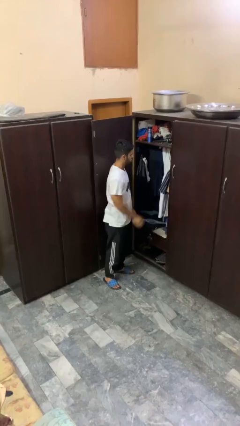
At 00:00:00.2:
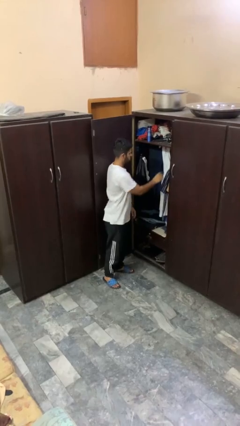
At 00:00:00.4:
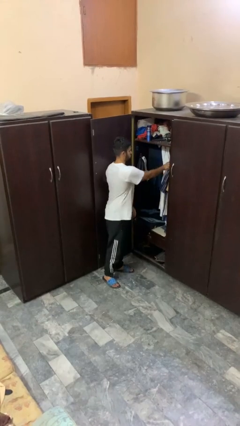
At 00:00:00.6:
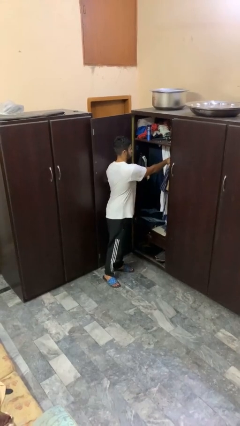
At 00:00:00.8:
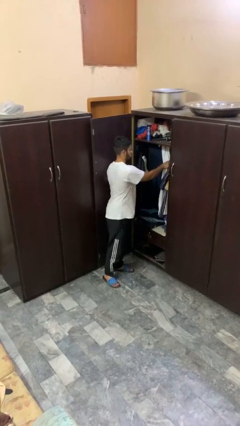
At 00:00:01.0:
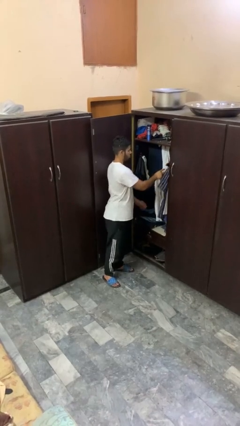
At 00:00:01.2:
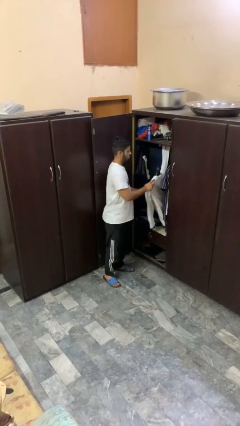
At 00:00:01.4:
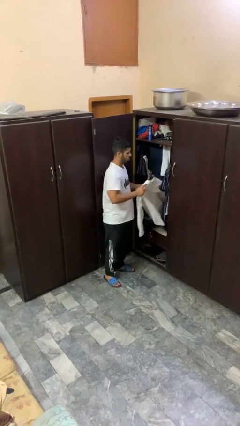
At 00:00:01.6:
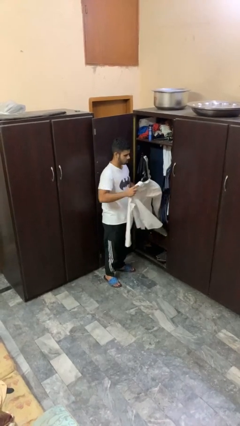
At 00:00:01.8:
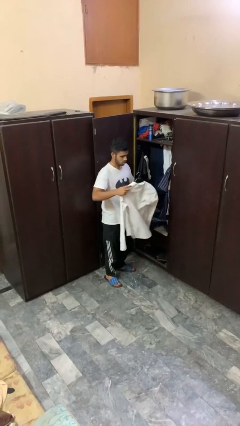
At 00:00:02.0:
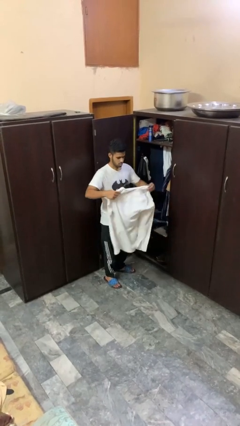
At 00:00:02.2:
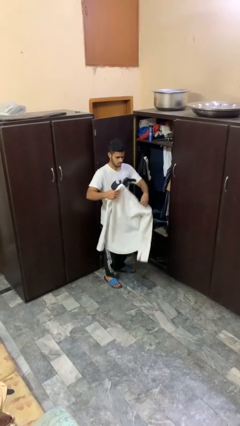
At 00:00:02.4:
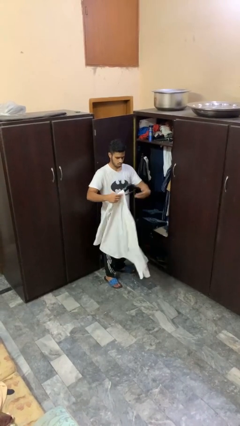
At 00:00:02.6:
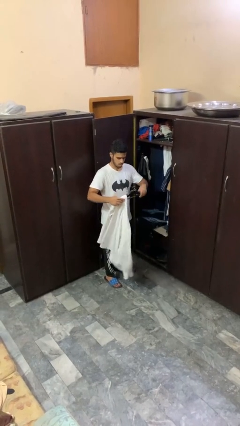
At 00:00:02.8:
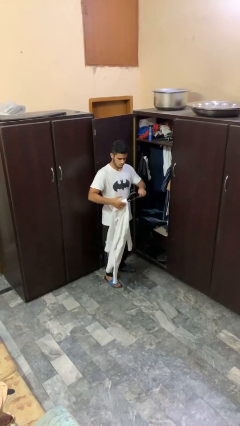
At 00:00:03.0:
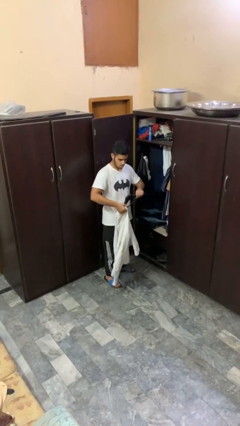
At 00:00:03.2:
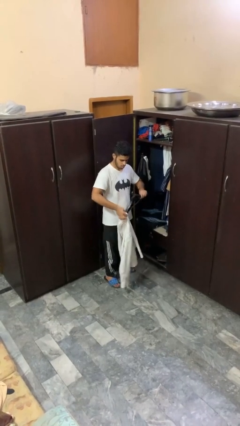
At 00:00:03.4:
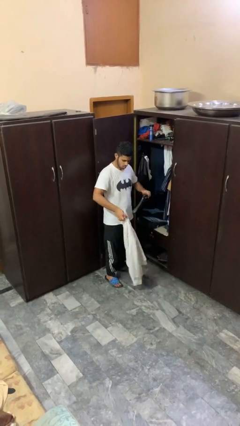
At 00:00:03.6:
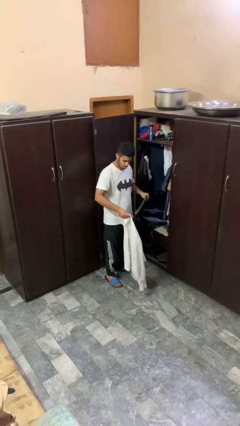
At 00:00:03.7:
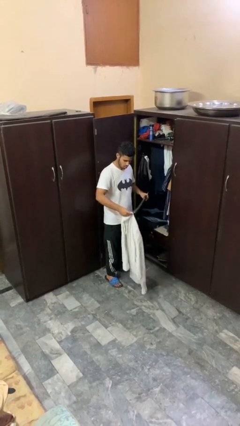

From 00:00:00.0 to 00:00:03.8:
person takes clothes from closet

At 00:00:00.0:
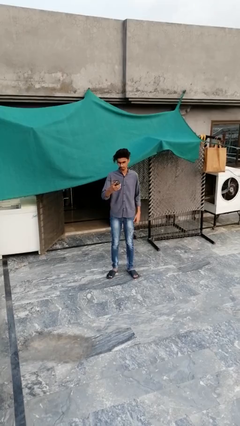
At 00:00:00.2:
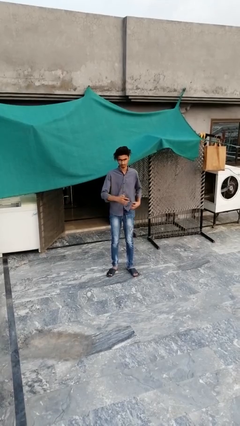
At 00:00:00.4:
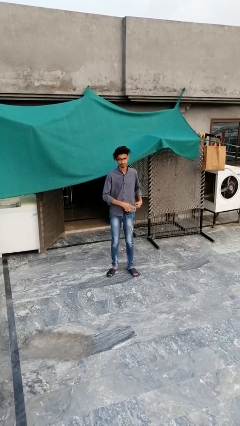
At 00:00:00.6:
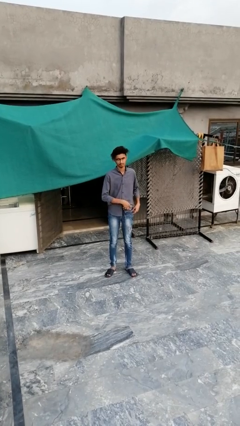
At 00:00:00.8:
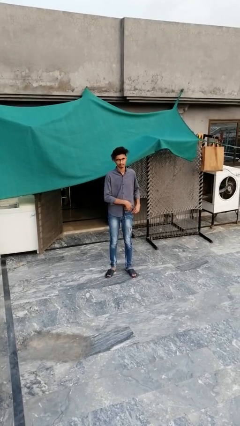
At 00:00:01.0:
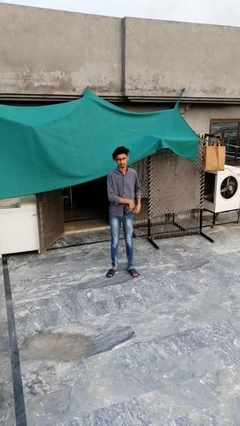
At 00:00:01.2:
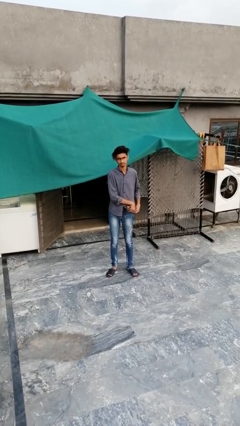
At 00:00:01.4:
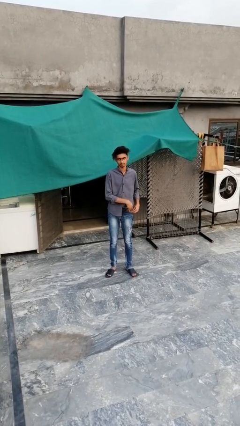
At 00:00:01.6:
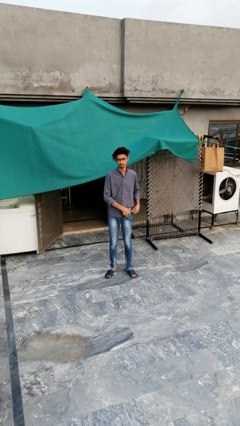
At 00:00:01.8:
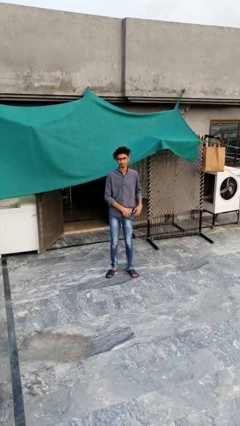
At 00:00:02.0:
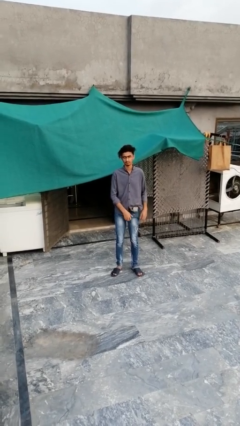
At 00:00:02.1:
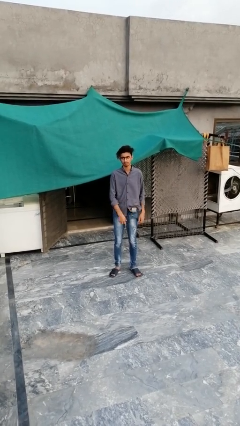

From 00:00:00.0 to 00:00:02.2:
person puts phone into pocket

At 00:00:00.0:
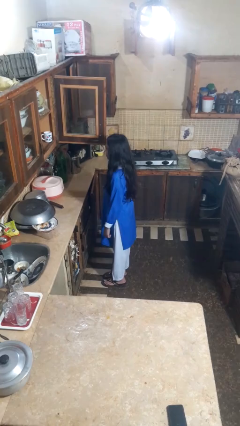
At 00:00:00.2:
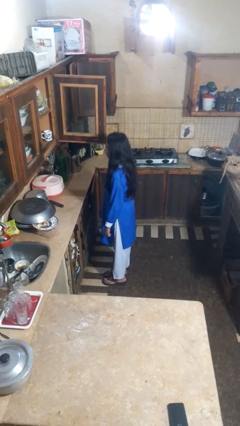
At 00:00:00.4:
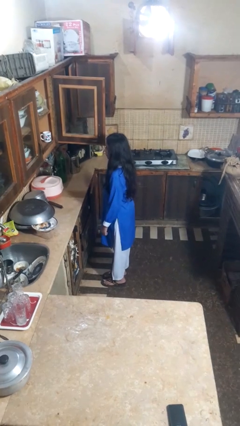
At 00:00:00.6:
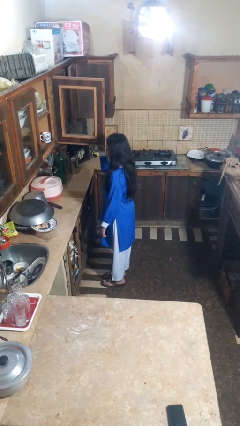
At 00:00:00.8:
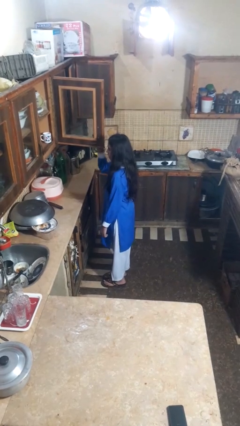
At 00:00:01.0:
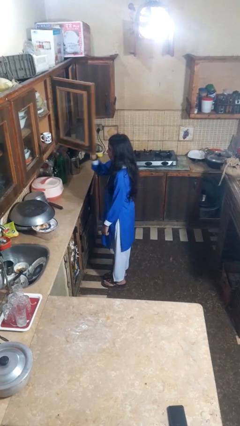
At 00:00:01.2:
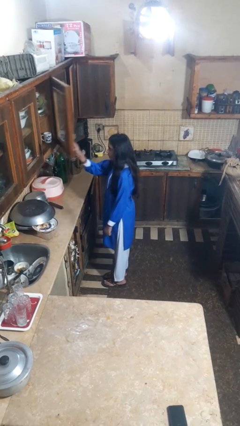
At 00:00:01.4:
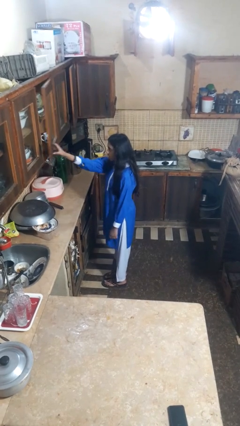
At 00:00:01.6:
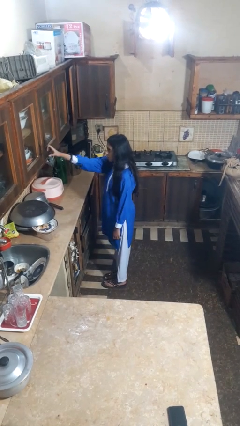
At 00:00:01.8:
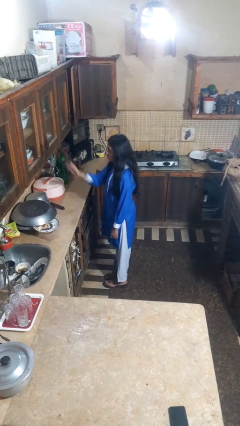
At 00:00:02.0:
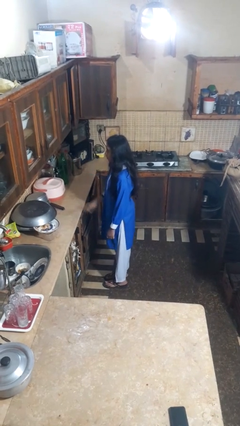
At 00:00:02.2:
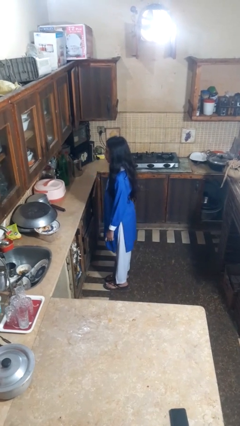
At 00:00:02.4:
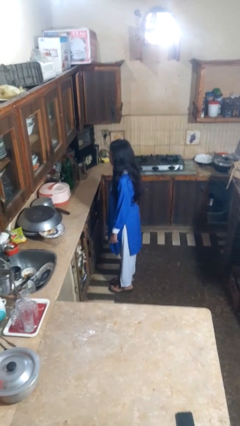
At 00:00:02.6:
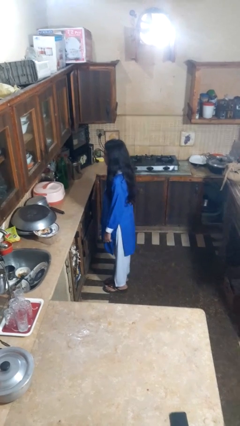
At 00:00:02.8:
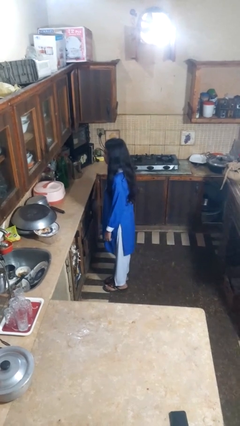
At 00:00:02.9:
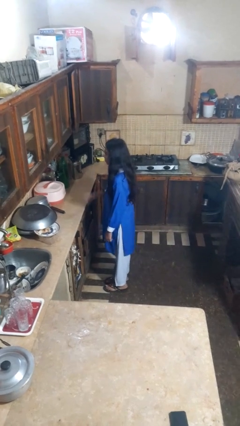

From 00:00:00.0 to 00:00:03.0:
person closes cabinet

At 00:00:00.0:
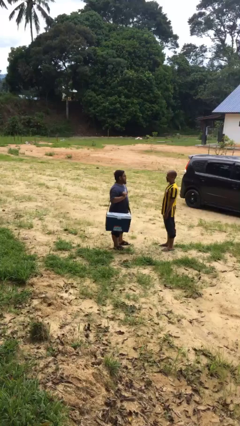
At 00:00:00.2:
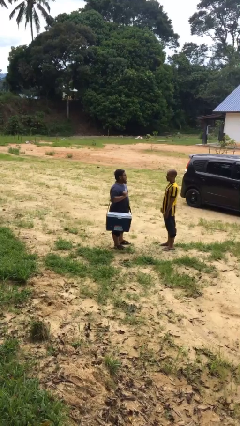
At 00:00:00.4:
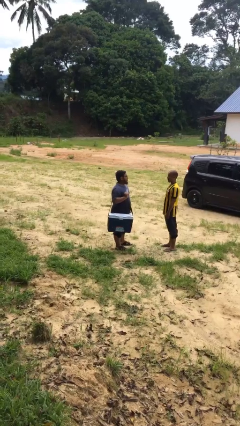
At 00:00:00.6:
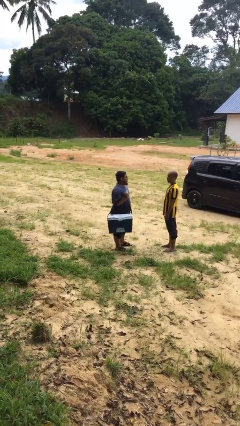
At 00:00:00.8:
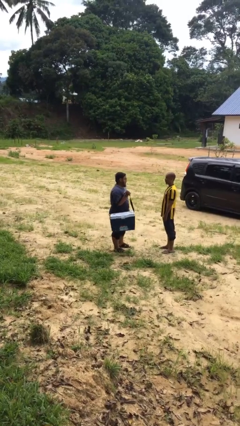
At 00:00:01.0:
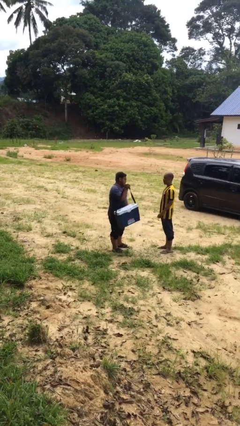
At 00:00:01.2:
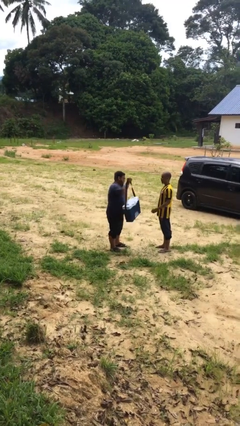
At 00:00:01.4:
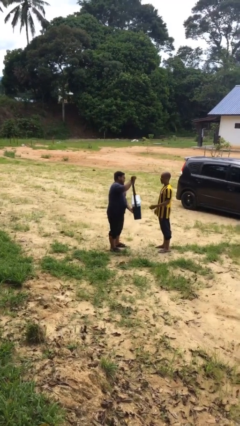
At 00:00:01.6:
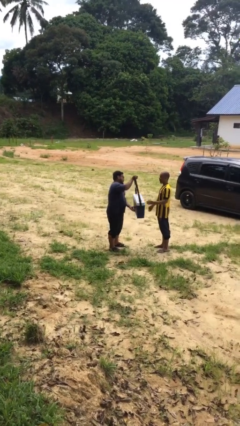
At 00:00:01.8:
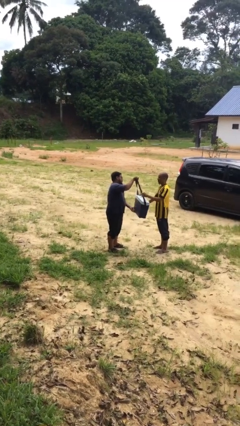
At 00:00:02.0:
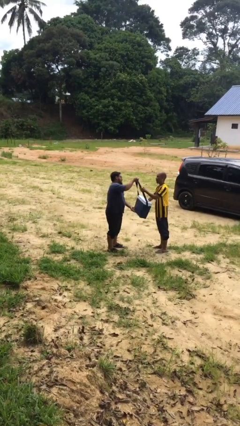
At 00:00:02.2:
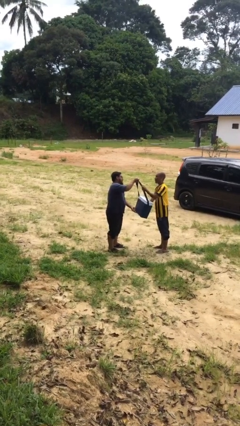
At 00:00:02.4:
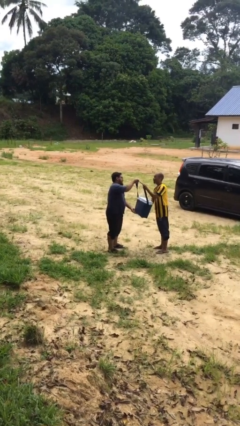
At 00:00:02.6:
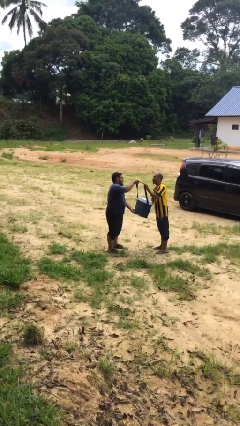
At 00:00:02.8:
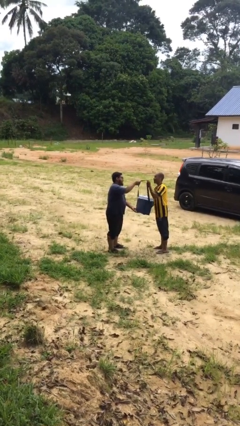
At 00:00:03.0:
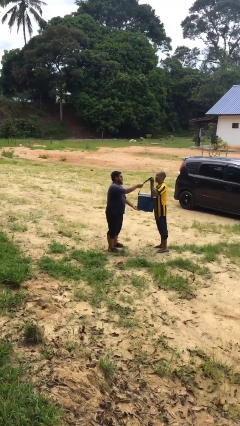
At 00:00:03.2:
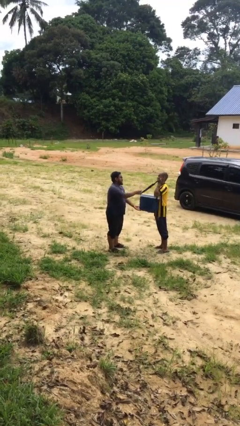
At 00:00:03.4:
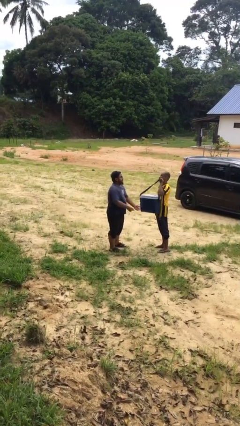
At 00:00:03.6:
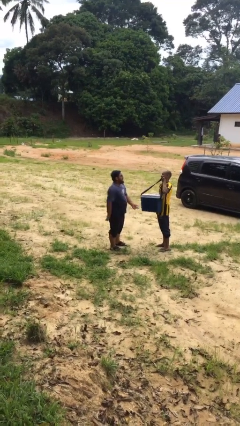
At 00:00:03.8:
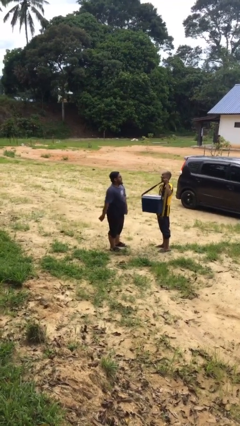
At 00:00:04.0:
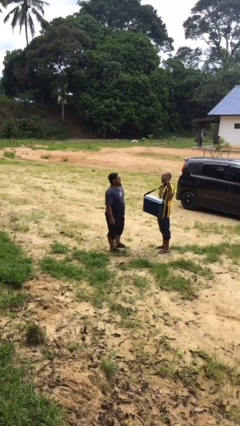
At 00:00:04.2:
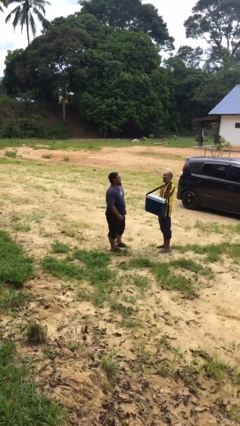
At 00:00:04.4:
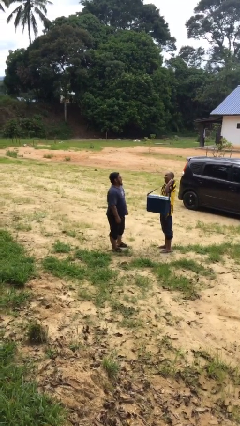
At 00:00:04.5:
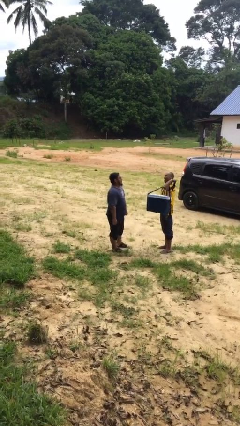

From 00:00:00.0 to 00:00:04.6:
person transfers object to person

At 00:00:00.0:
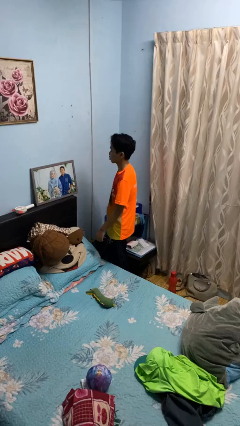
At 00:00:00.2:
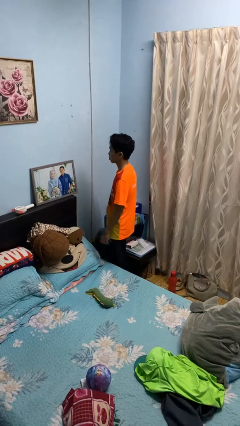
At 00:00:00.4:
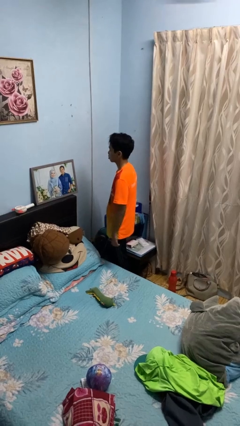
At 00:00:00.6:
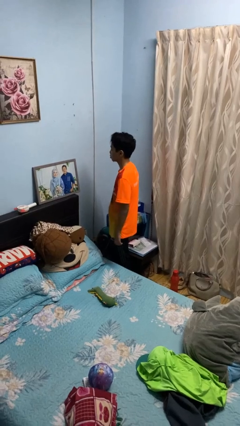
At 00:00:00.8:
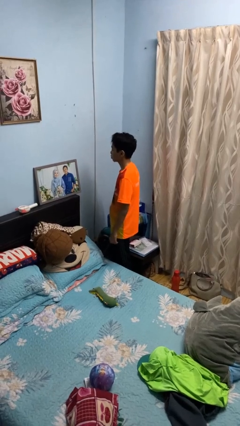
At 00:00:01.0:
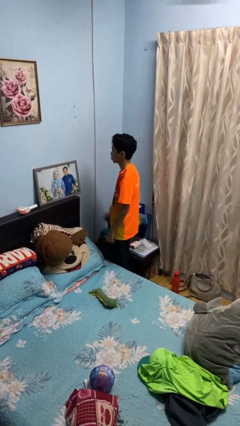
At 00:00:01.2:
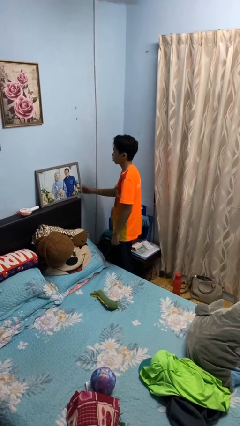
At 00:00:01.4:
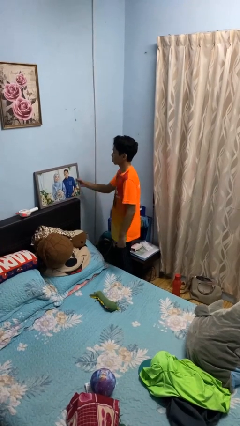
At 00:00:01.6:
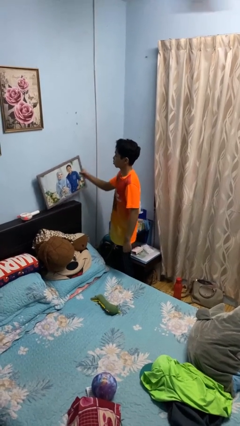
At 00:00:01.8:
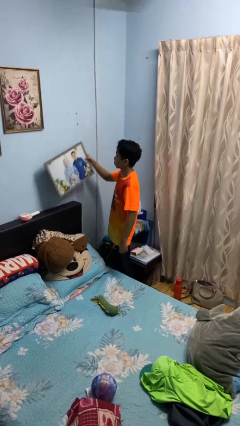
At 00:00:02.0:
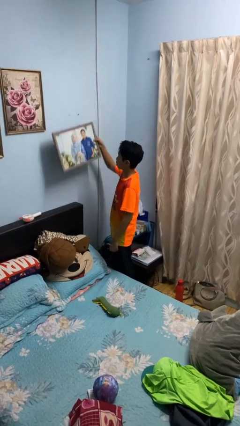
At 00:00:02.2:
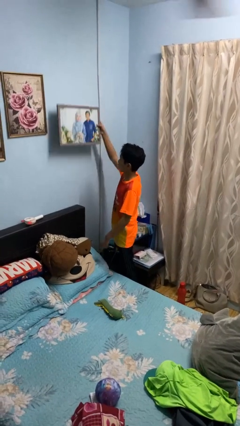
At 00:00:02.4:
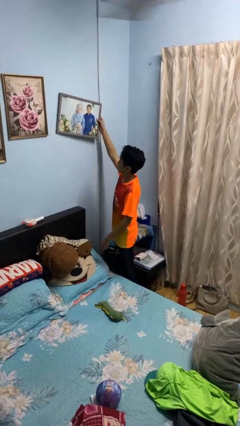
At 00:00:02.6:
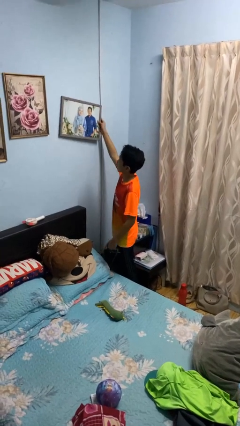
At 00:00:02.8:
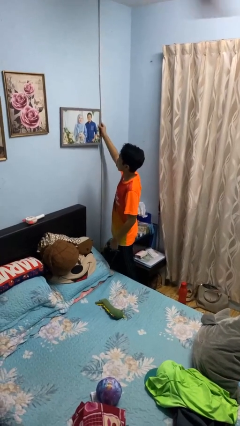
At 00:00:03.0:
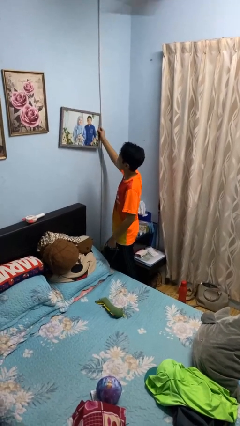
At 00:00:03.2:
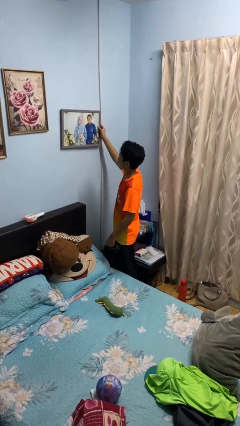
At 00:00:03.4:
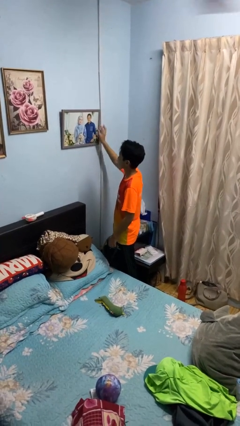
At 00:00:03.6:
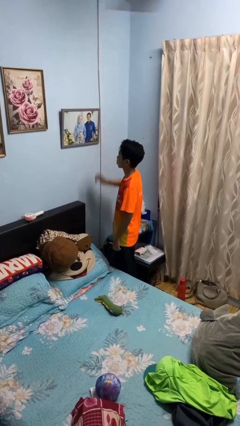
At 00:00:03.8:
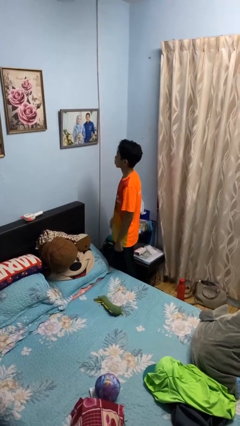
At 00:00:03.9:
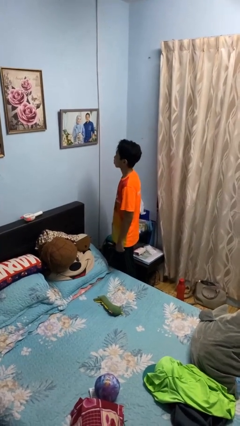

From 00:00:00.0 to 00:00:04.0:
person puts up picture frame
